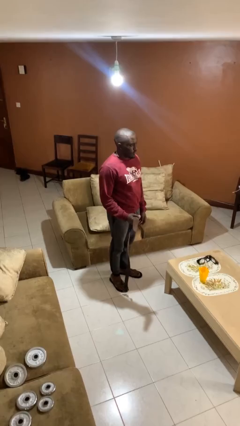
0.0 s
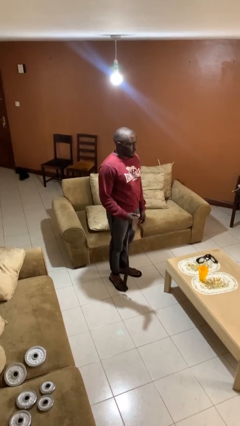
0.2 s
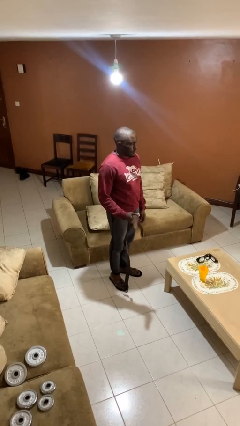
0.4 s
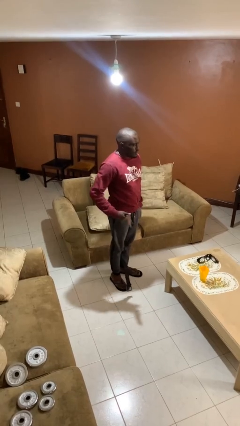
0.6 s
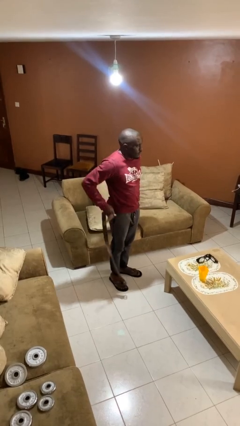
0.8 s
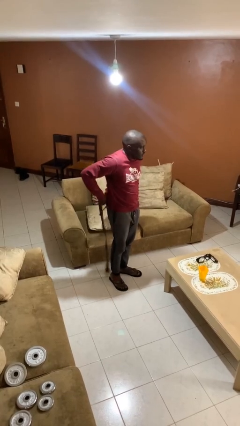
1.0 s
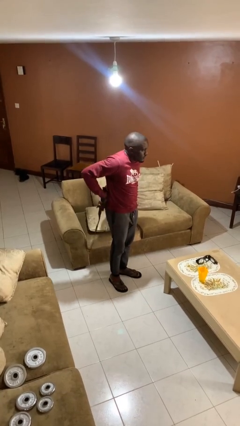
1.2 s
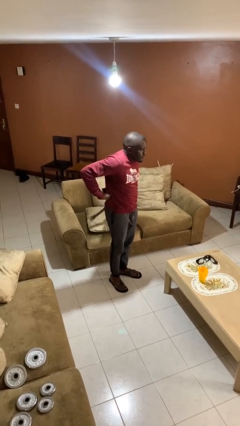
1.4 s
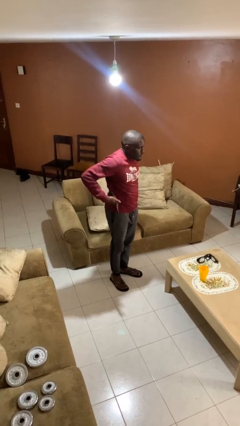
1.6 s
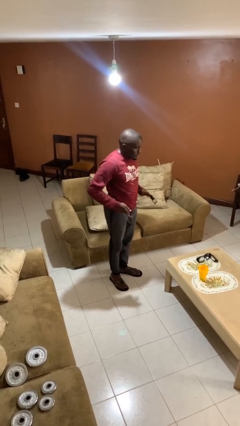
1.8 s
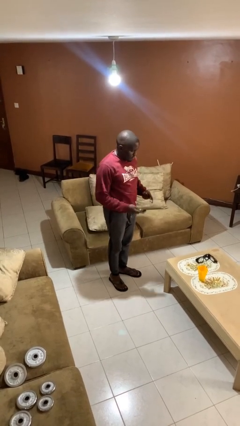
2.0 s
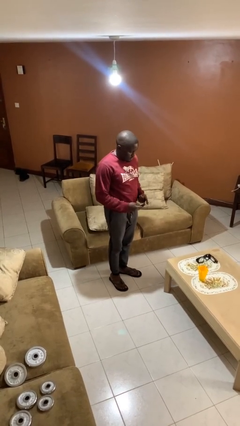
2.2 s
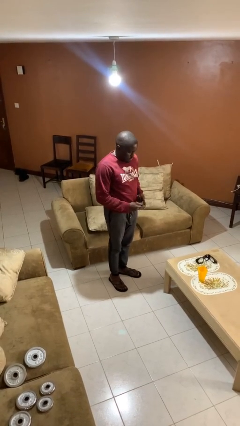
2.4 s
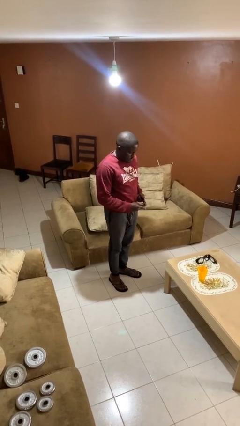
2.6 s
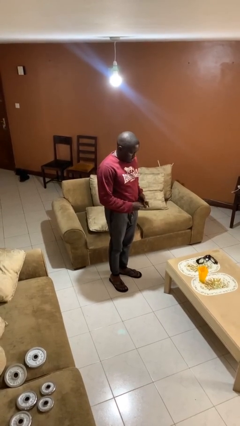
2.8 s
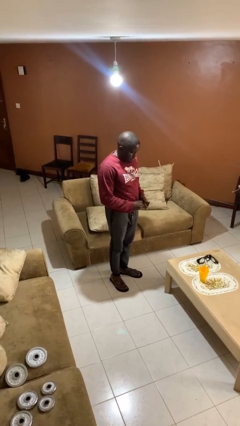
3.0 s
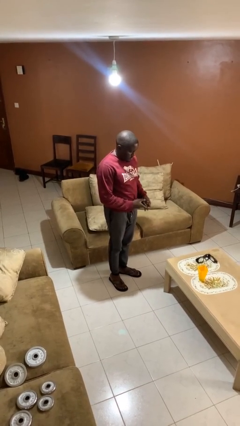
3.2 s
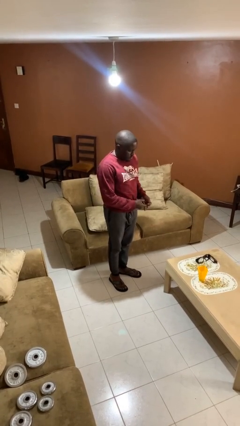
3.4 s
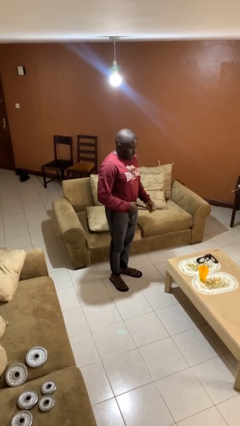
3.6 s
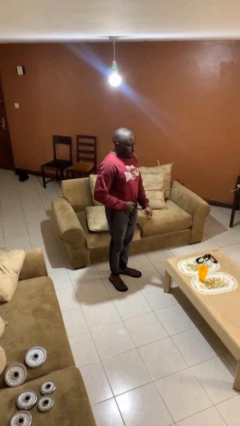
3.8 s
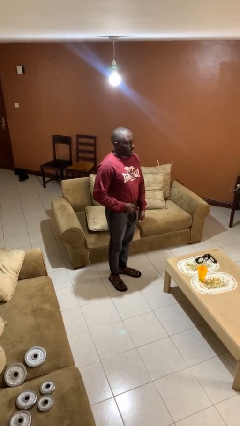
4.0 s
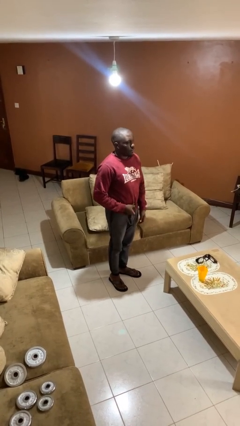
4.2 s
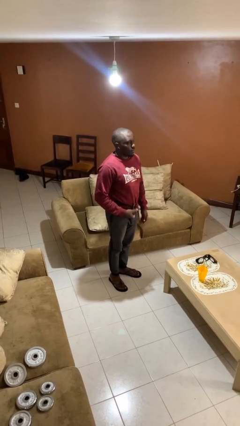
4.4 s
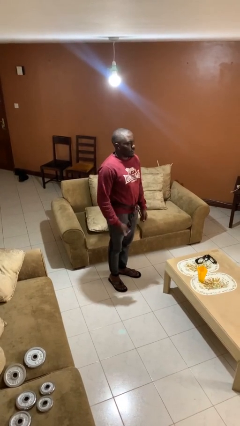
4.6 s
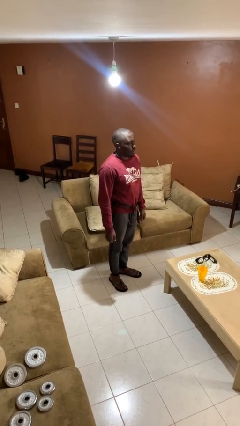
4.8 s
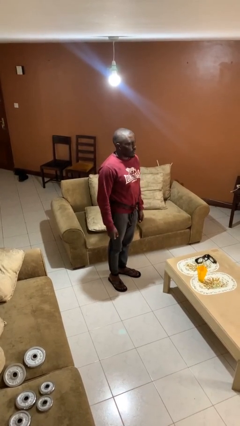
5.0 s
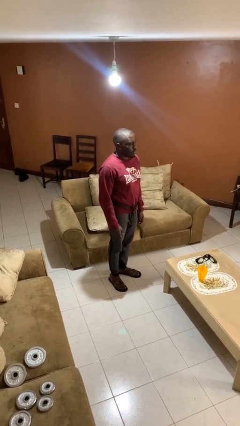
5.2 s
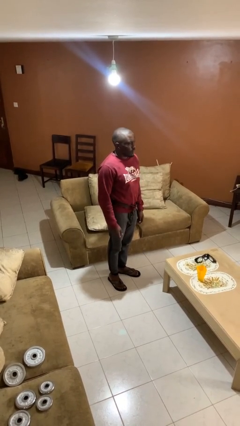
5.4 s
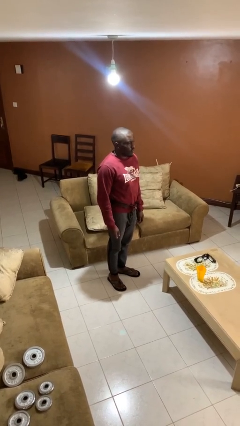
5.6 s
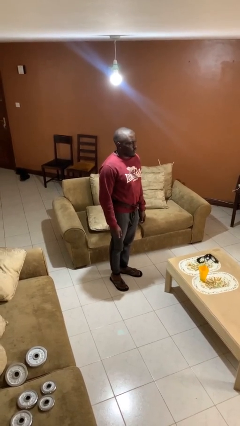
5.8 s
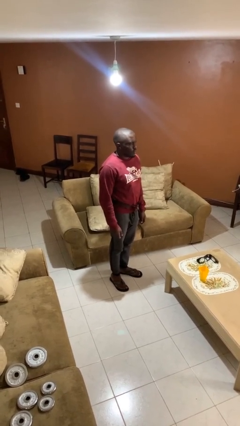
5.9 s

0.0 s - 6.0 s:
person puts on belt

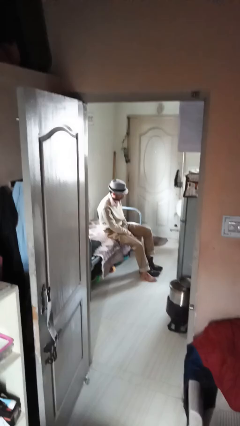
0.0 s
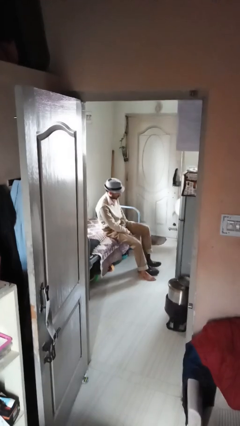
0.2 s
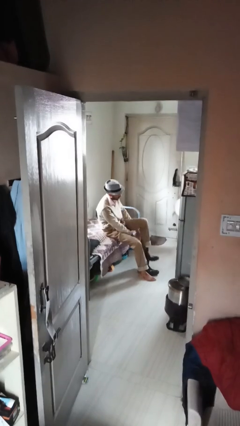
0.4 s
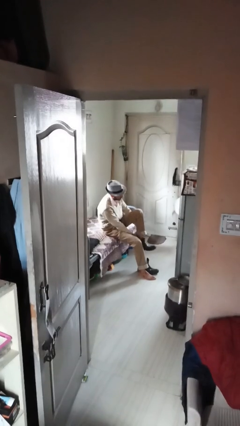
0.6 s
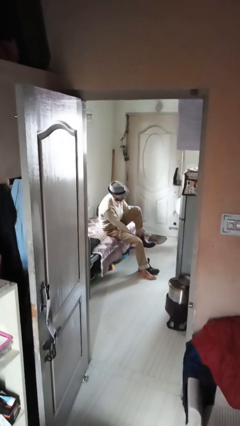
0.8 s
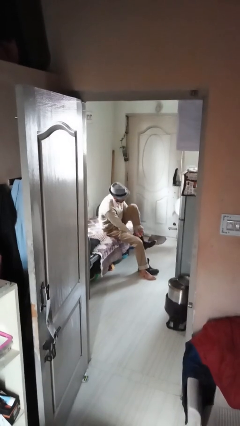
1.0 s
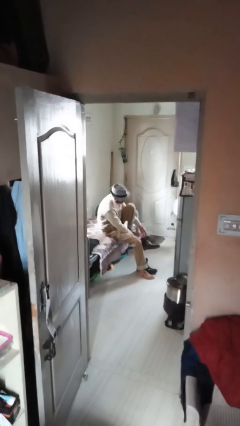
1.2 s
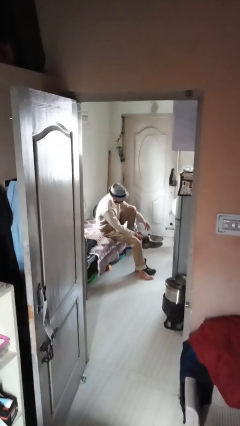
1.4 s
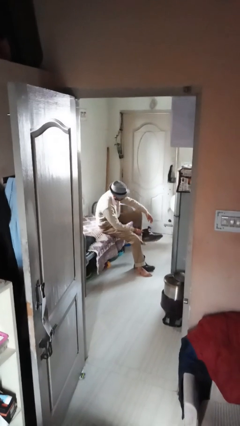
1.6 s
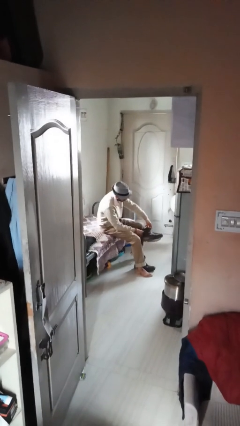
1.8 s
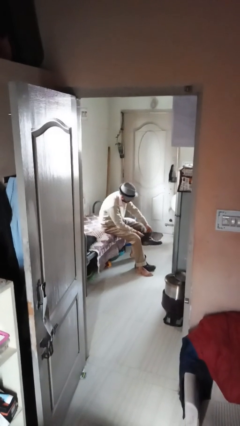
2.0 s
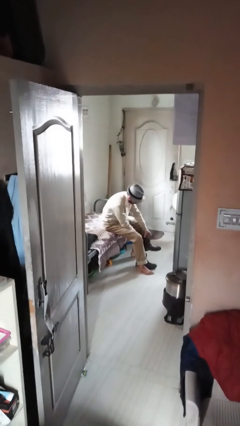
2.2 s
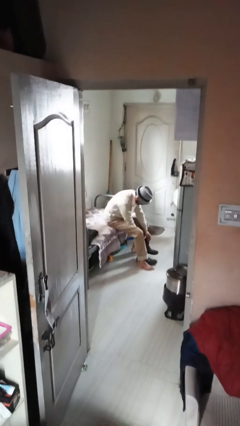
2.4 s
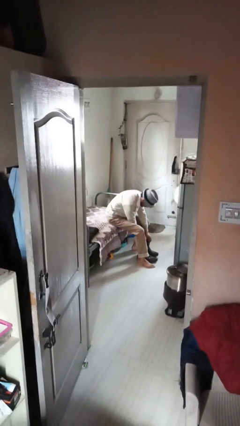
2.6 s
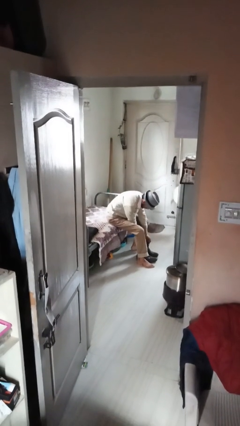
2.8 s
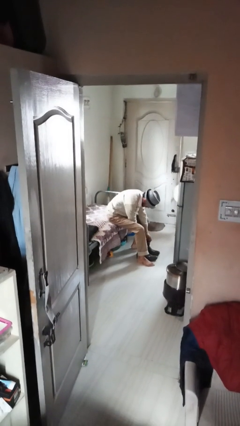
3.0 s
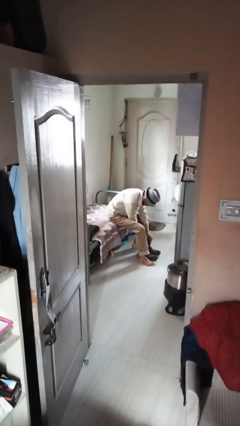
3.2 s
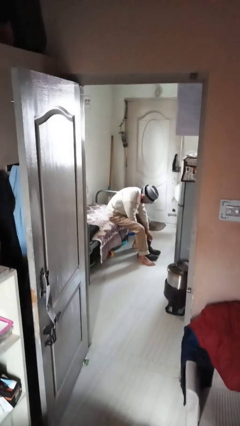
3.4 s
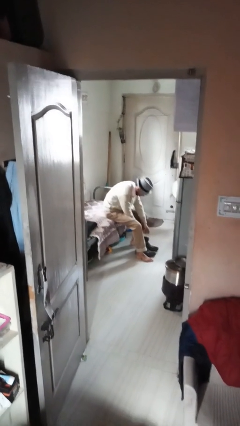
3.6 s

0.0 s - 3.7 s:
person takes off boots

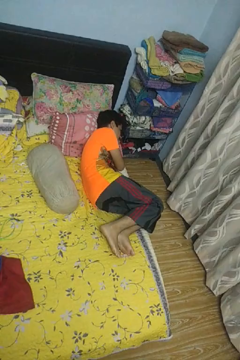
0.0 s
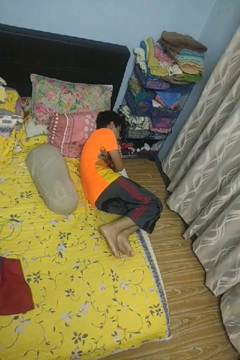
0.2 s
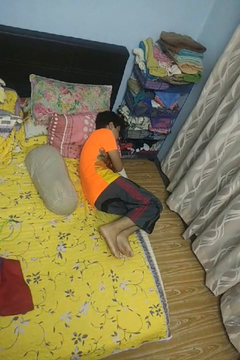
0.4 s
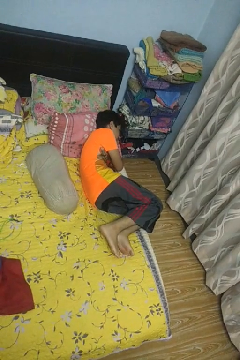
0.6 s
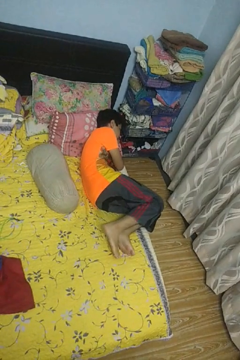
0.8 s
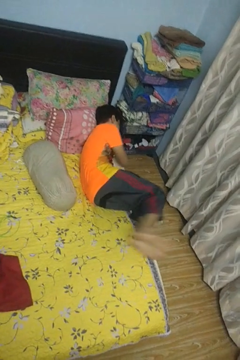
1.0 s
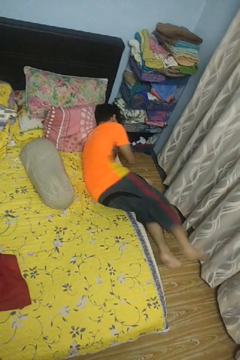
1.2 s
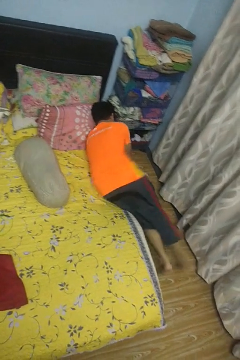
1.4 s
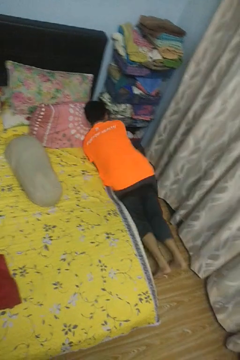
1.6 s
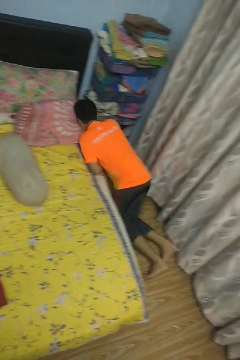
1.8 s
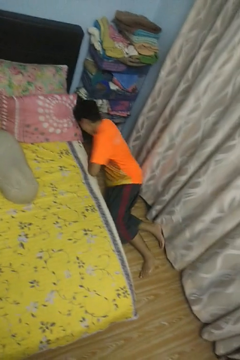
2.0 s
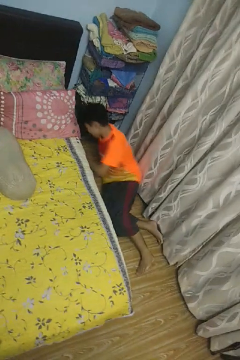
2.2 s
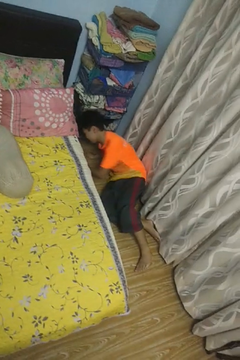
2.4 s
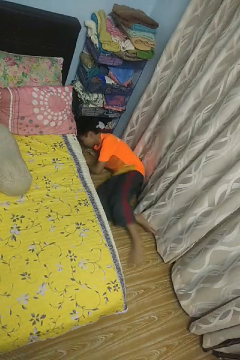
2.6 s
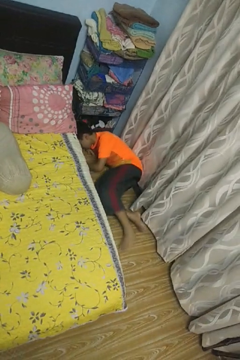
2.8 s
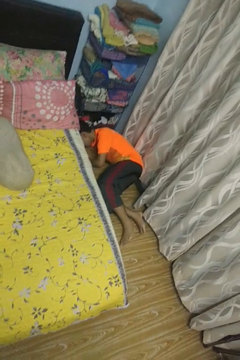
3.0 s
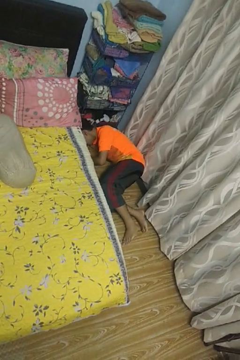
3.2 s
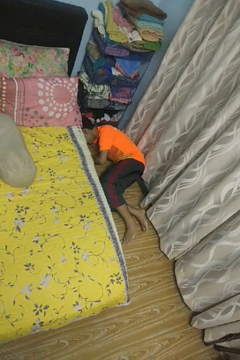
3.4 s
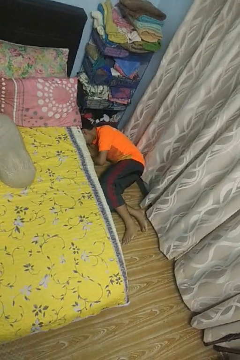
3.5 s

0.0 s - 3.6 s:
person falls from bed

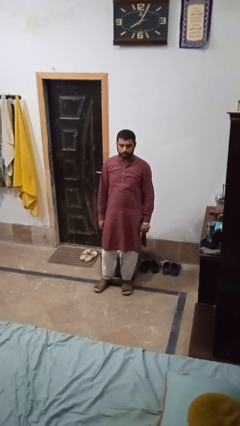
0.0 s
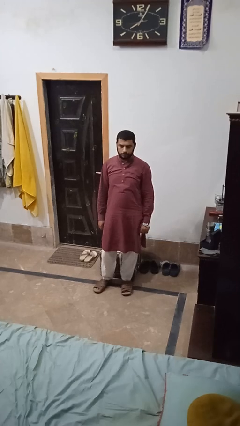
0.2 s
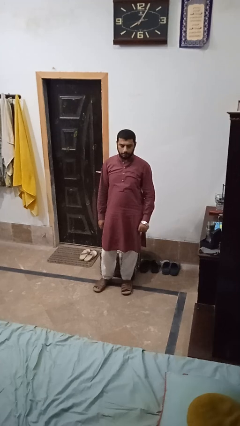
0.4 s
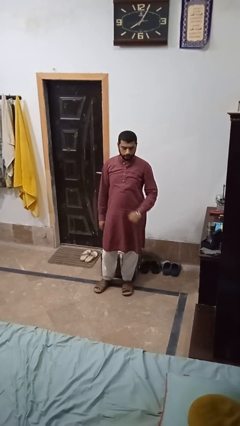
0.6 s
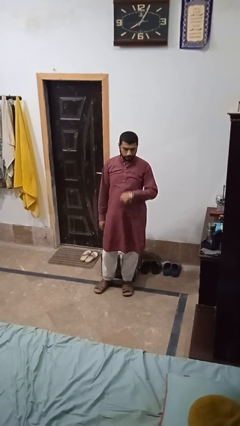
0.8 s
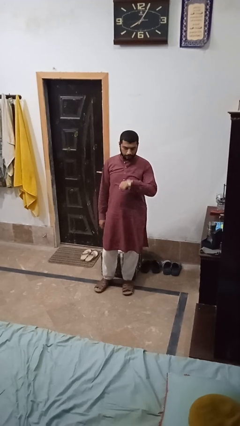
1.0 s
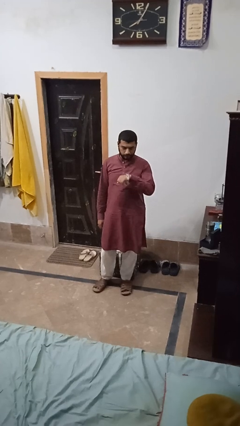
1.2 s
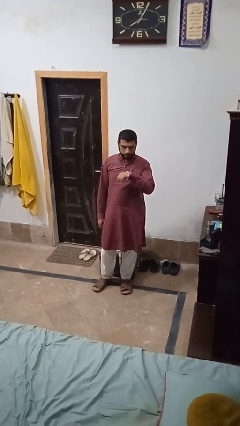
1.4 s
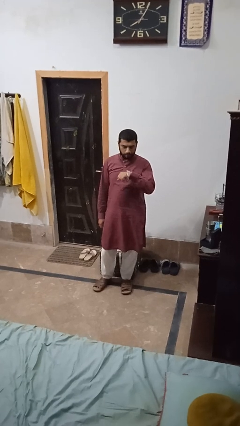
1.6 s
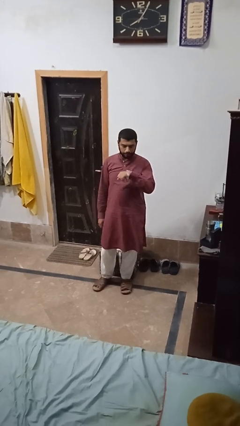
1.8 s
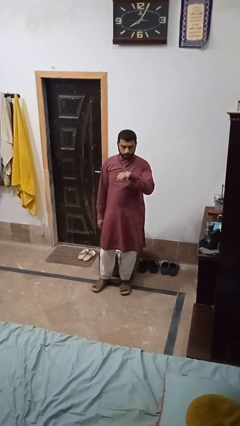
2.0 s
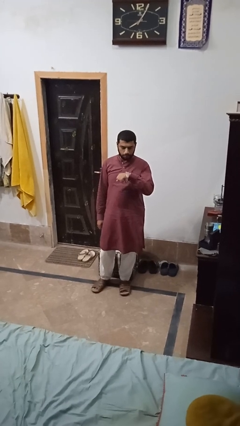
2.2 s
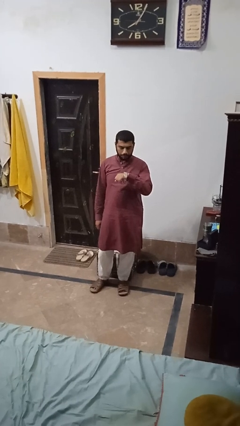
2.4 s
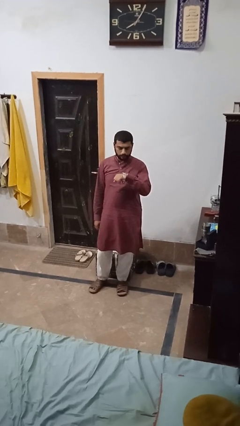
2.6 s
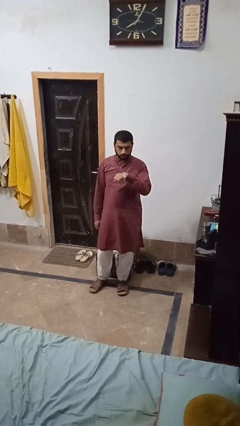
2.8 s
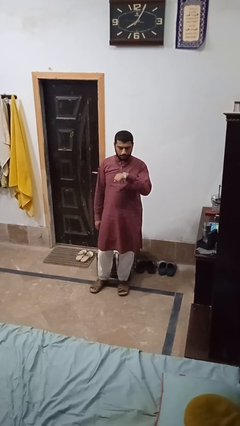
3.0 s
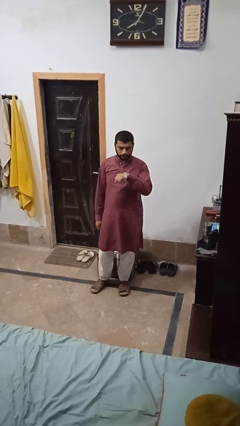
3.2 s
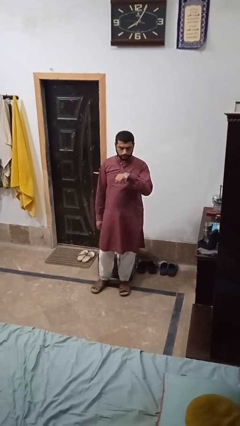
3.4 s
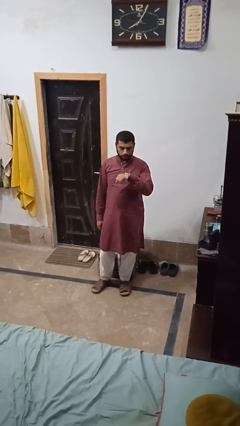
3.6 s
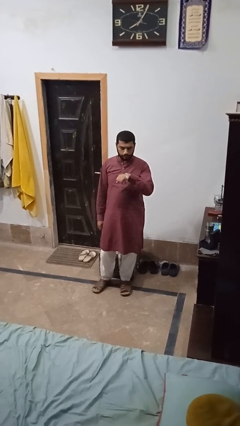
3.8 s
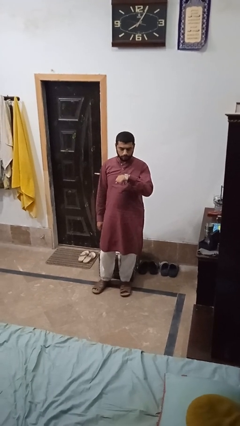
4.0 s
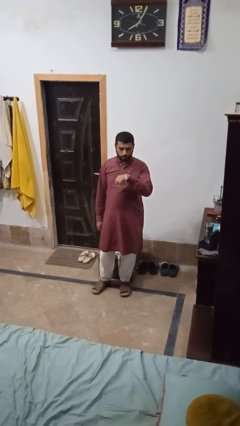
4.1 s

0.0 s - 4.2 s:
person looks at wristwatch

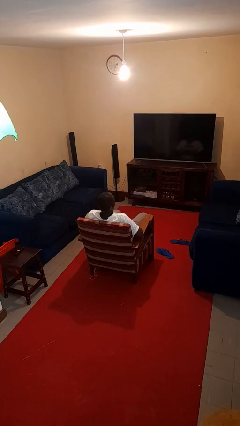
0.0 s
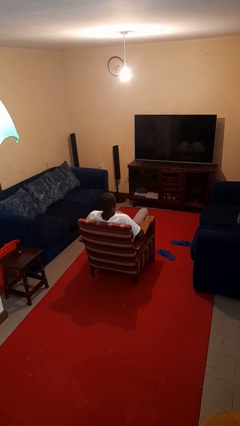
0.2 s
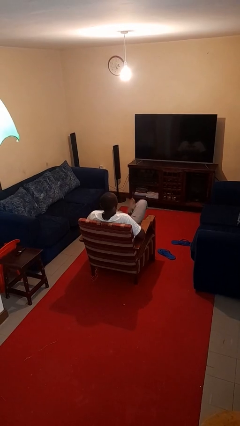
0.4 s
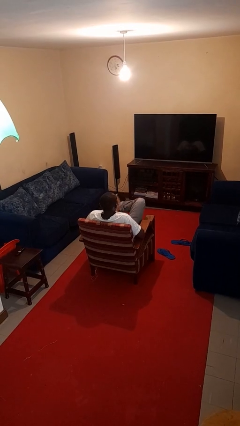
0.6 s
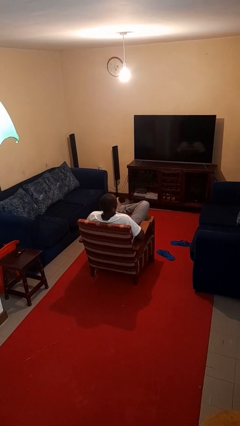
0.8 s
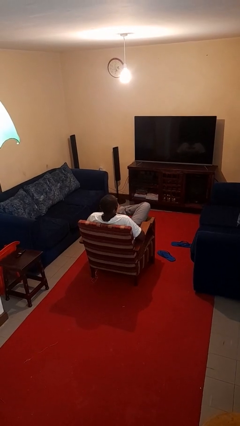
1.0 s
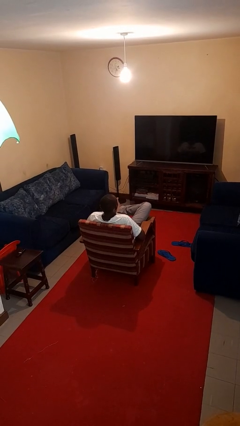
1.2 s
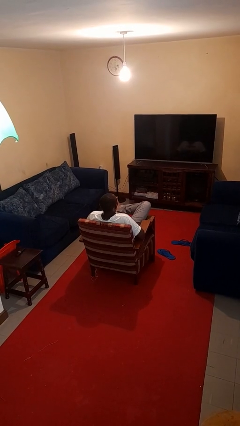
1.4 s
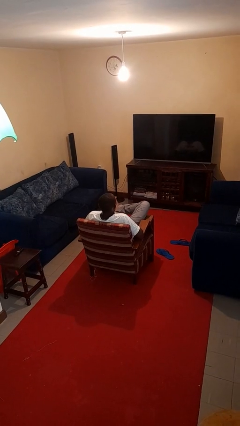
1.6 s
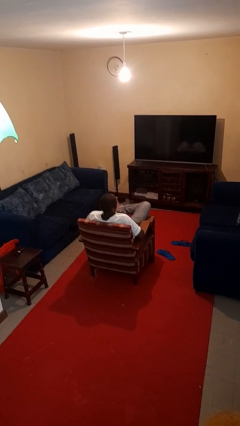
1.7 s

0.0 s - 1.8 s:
person crosses legs
